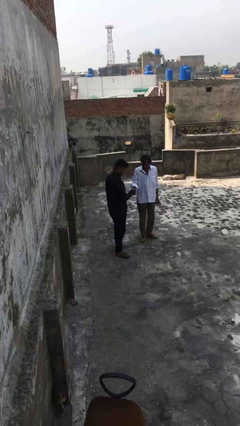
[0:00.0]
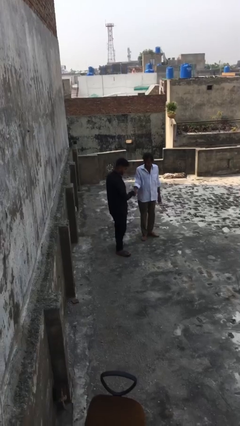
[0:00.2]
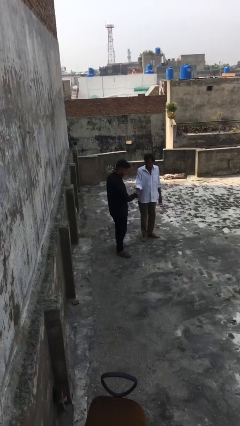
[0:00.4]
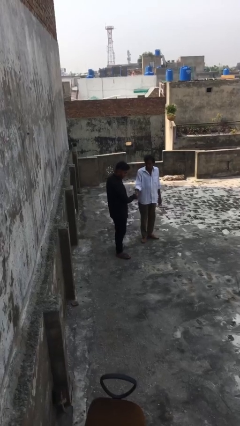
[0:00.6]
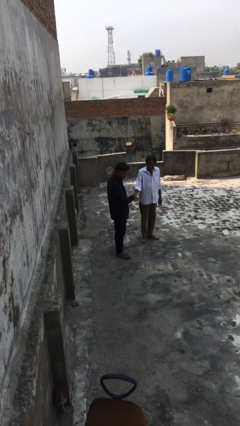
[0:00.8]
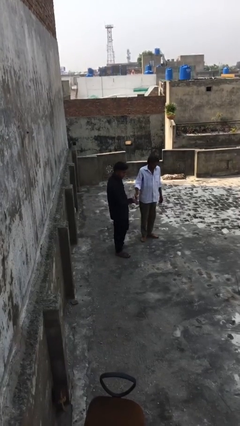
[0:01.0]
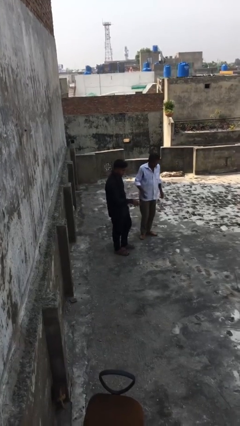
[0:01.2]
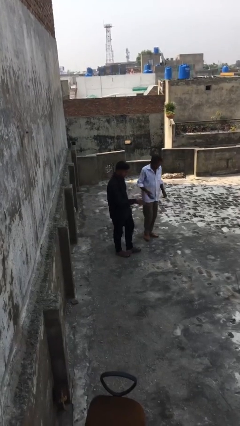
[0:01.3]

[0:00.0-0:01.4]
person shakes hand

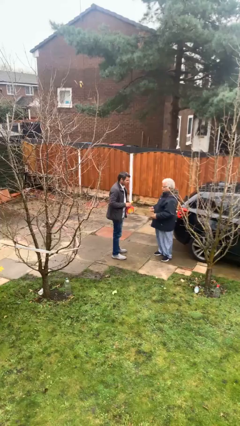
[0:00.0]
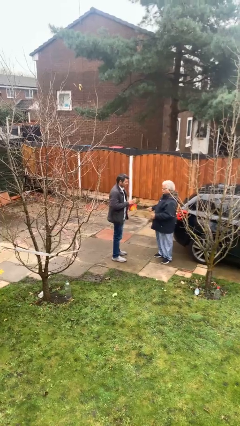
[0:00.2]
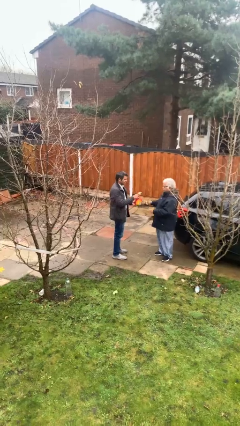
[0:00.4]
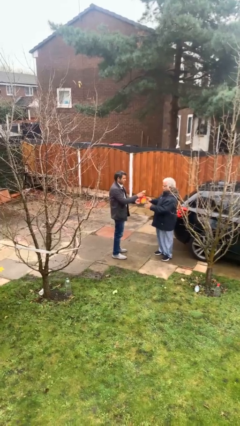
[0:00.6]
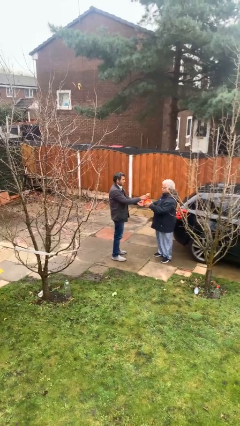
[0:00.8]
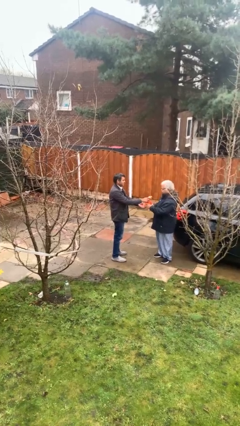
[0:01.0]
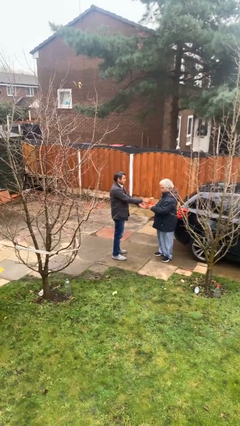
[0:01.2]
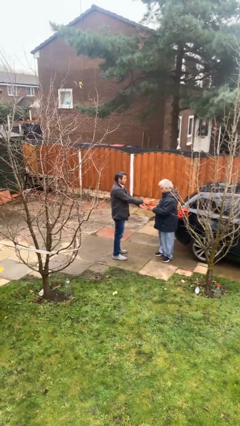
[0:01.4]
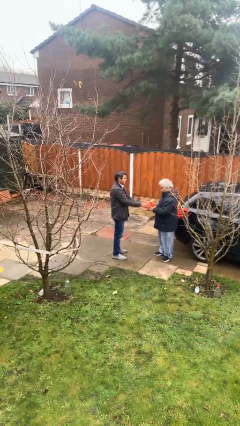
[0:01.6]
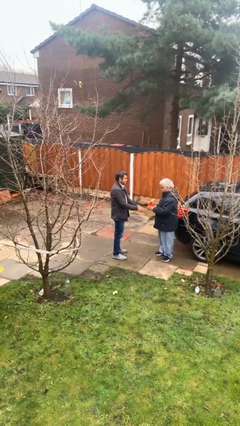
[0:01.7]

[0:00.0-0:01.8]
person transfers object to person

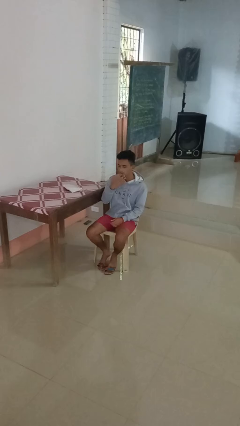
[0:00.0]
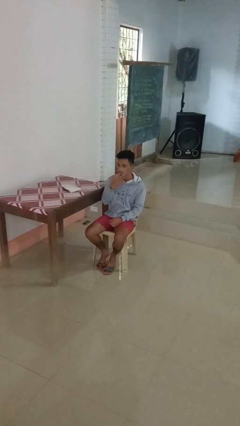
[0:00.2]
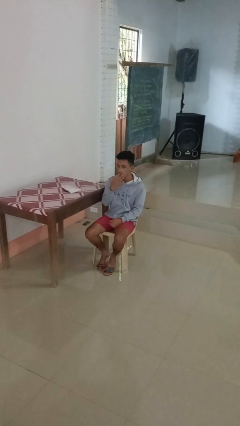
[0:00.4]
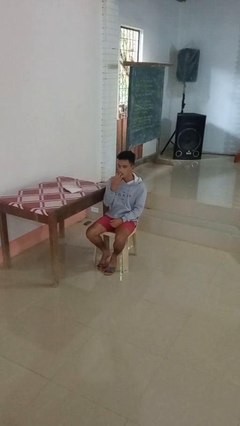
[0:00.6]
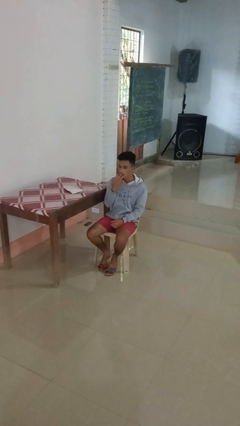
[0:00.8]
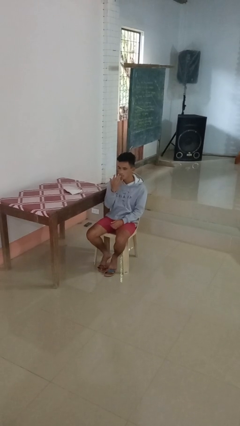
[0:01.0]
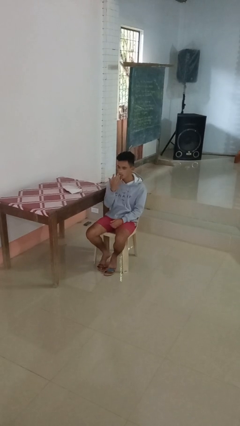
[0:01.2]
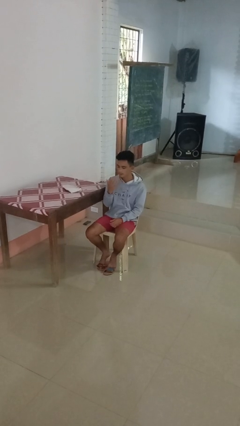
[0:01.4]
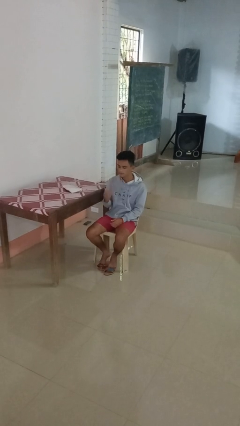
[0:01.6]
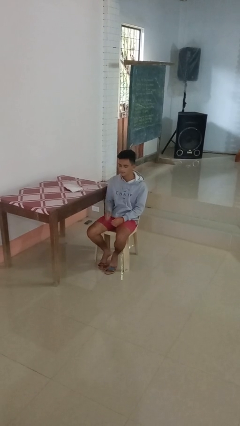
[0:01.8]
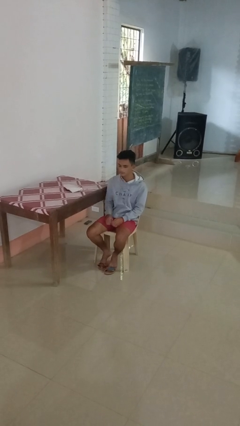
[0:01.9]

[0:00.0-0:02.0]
person licks fingers

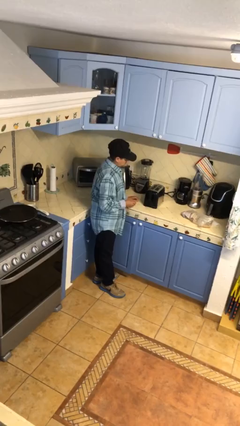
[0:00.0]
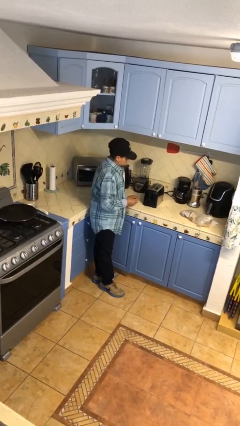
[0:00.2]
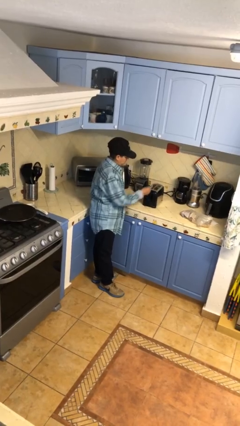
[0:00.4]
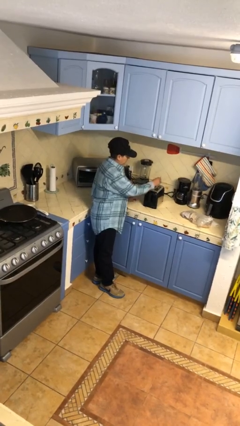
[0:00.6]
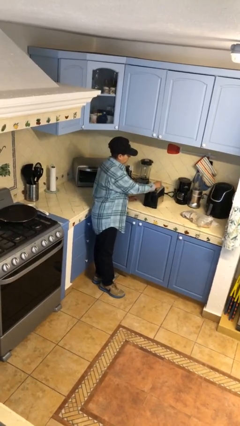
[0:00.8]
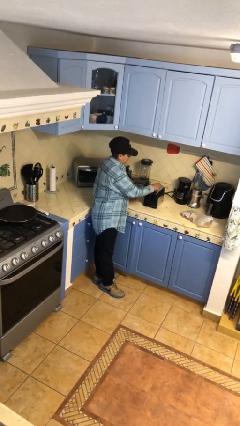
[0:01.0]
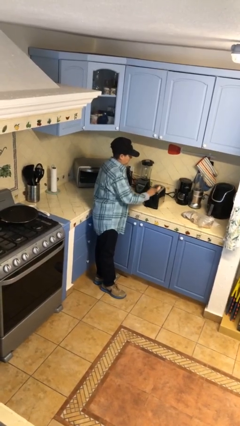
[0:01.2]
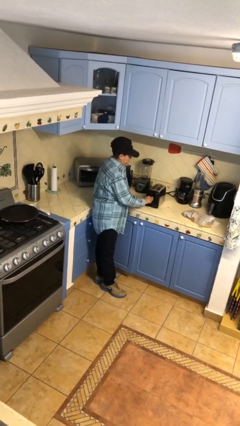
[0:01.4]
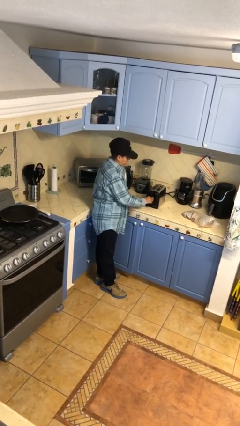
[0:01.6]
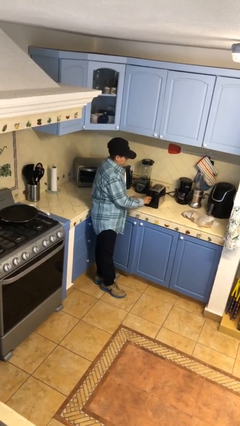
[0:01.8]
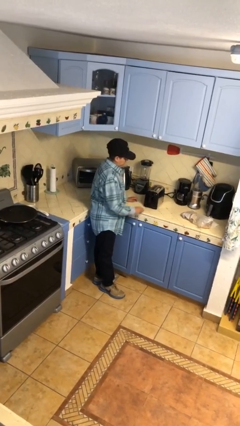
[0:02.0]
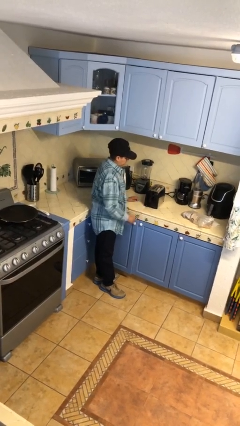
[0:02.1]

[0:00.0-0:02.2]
person puts object into toaster

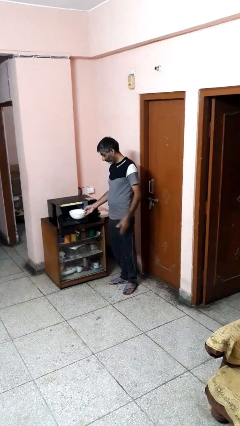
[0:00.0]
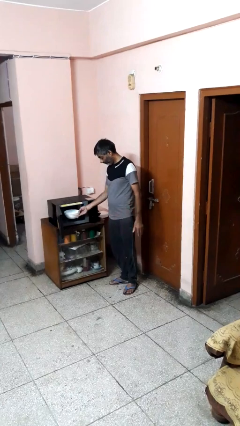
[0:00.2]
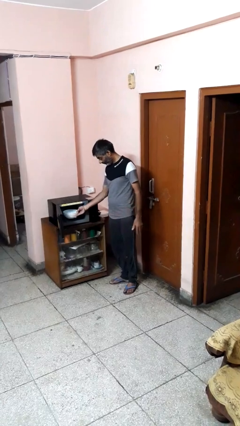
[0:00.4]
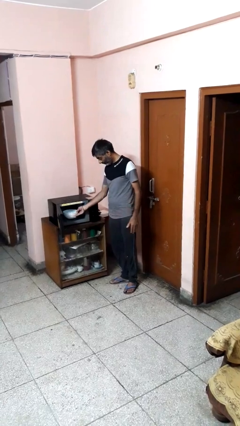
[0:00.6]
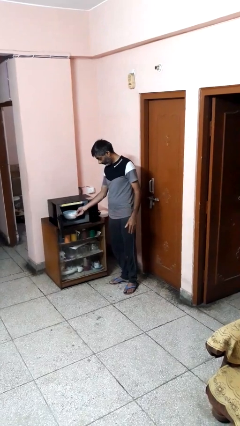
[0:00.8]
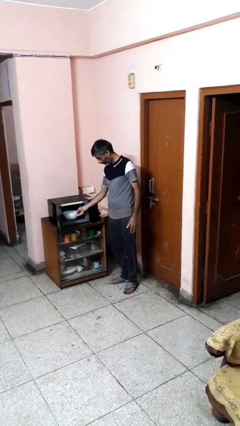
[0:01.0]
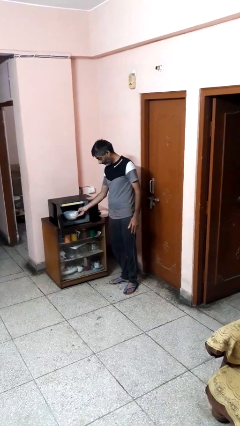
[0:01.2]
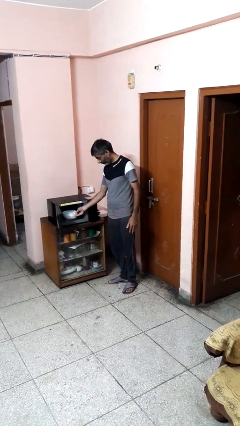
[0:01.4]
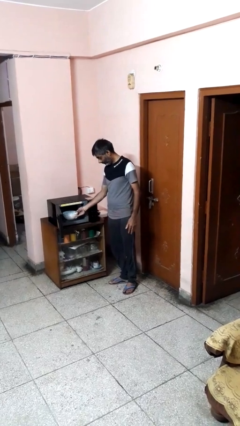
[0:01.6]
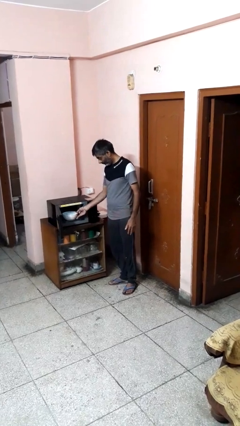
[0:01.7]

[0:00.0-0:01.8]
person puts object into microwave

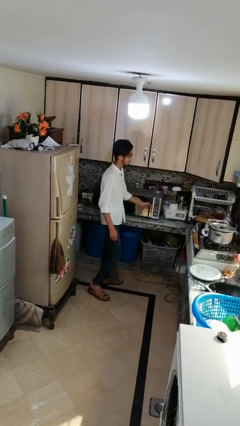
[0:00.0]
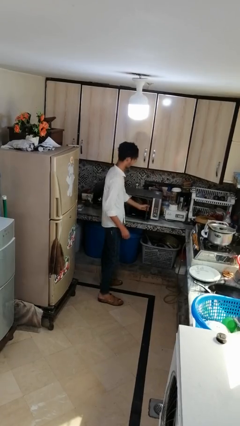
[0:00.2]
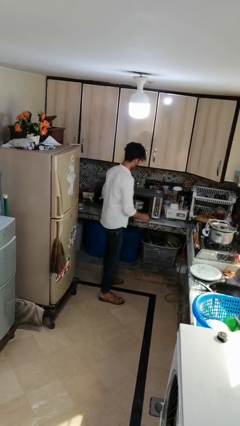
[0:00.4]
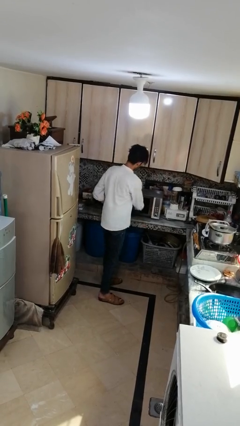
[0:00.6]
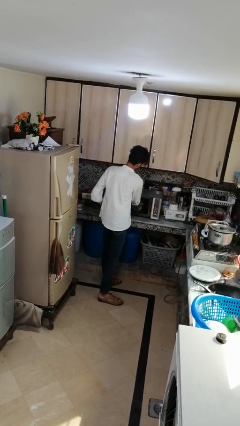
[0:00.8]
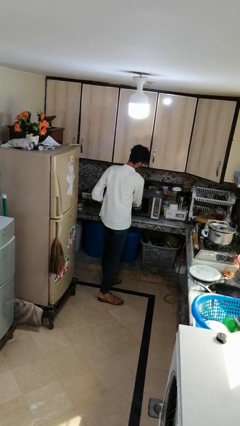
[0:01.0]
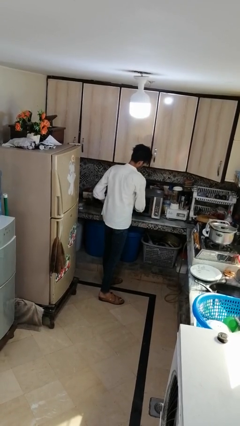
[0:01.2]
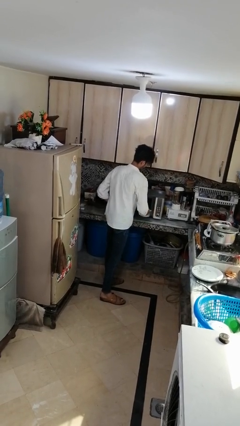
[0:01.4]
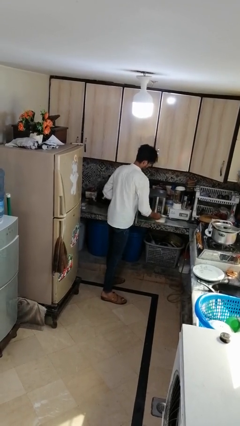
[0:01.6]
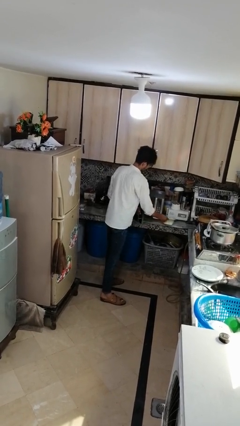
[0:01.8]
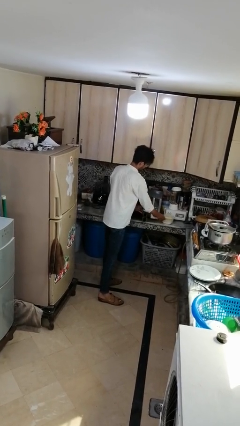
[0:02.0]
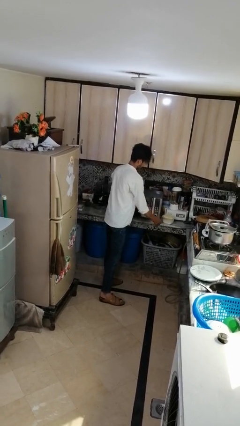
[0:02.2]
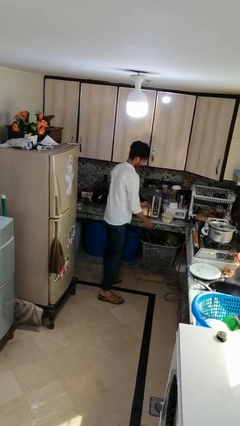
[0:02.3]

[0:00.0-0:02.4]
person takes object from microwave

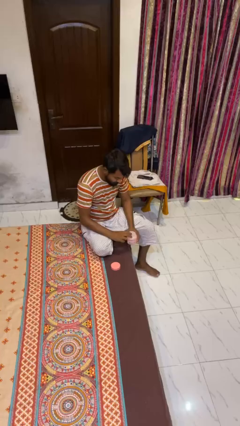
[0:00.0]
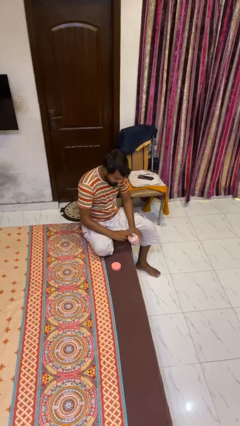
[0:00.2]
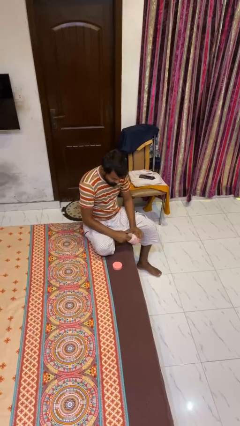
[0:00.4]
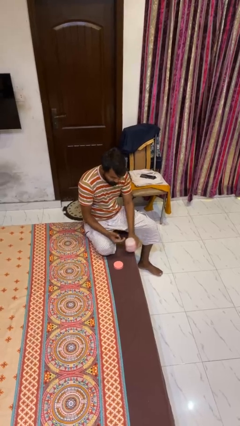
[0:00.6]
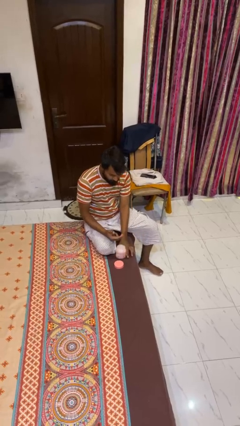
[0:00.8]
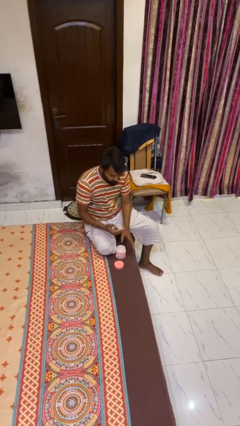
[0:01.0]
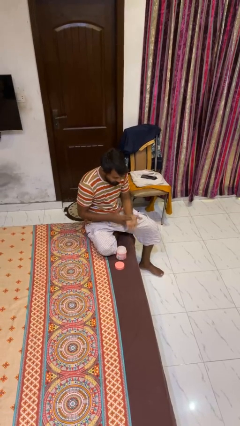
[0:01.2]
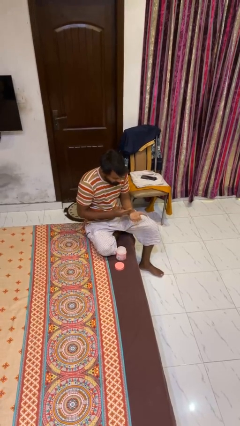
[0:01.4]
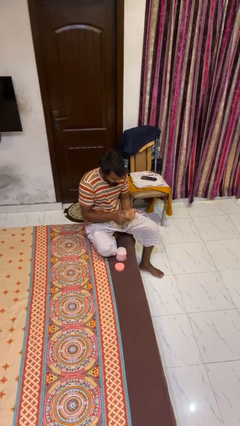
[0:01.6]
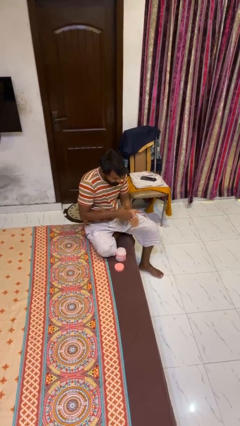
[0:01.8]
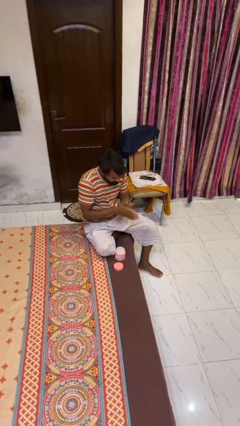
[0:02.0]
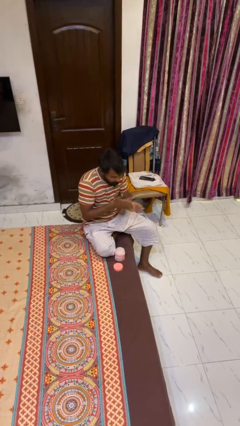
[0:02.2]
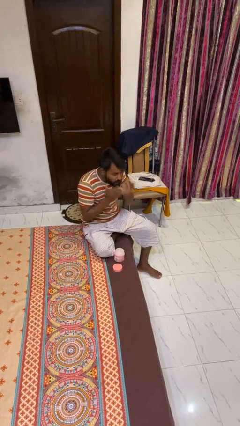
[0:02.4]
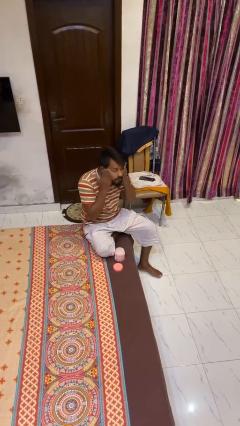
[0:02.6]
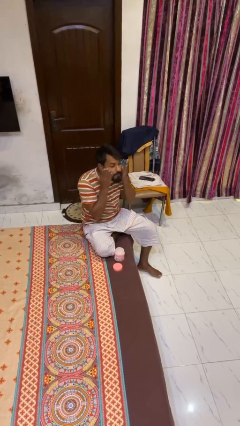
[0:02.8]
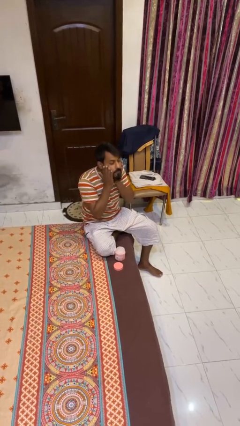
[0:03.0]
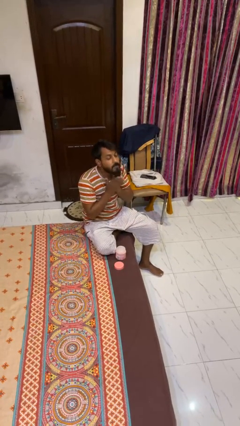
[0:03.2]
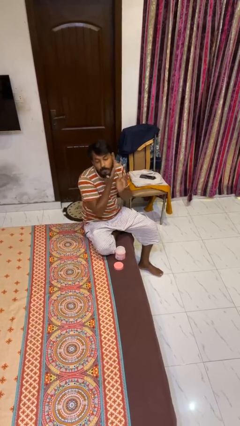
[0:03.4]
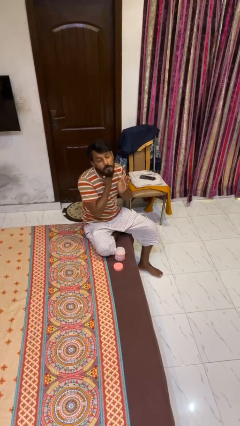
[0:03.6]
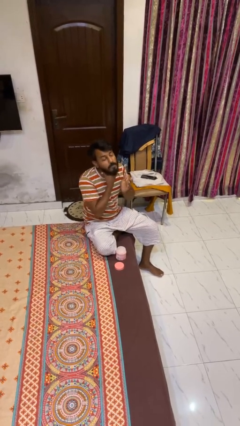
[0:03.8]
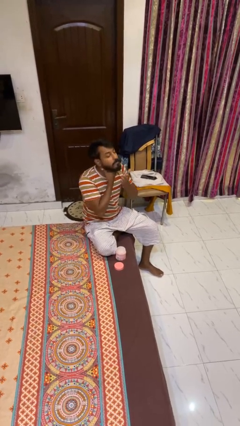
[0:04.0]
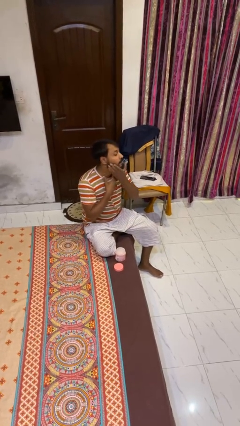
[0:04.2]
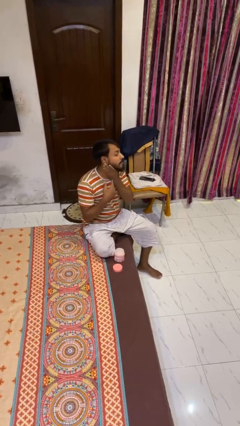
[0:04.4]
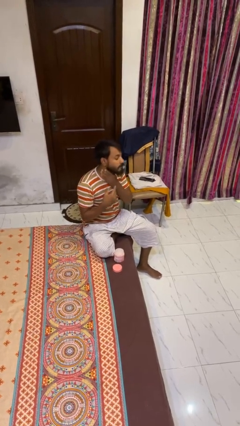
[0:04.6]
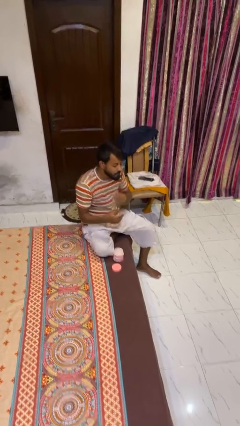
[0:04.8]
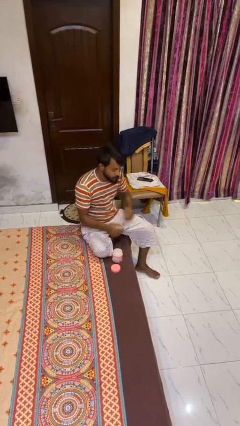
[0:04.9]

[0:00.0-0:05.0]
person applies facial moisturizer

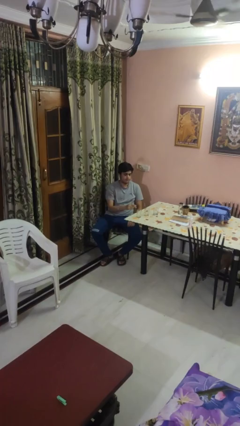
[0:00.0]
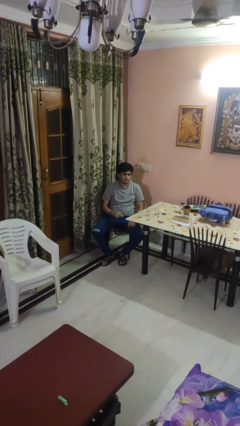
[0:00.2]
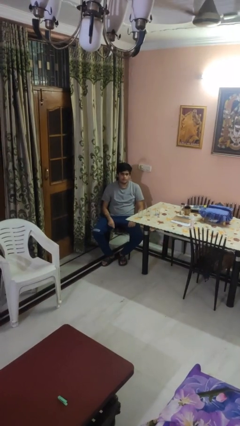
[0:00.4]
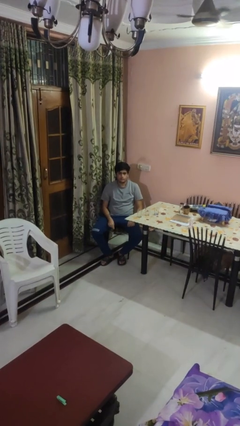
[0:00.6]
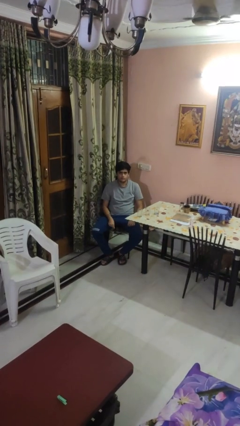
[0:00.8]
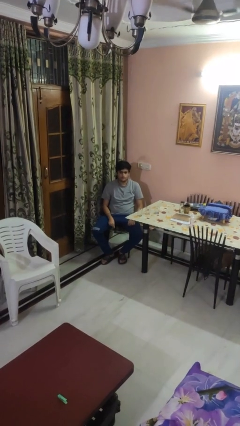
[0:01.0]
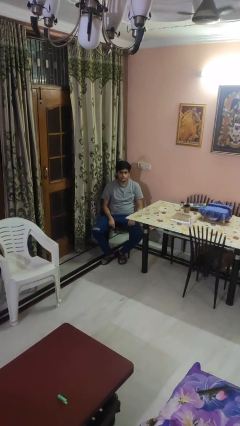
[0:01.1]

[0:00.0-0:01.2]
person puts down object on table
